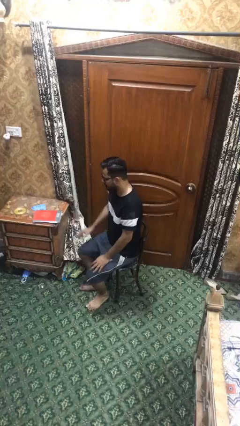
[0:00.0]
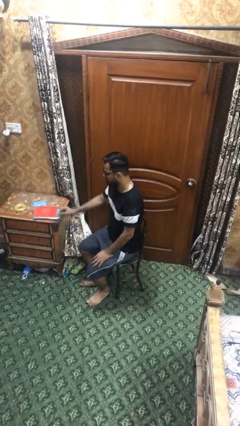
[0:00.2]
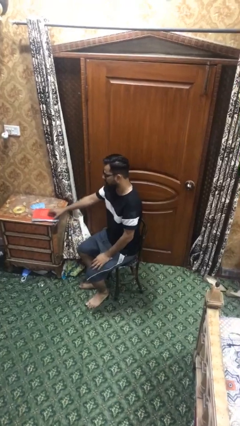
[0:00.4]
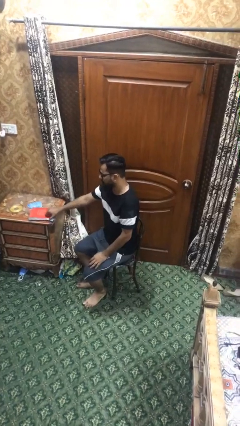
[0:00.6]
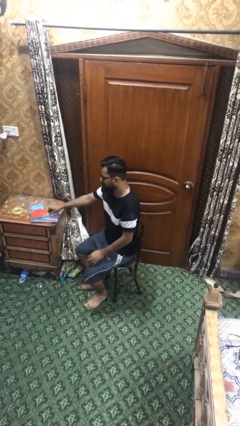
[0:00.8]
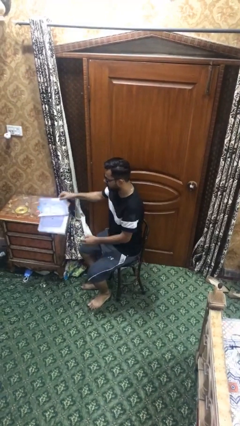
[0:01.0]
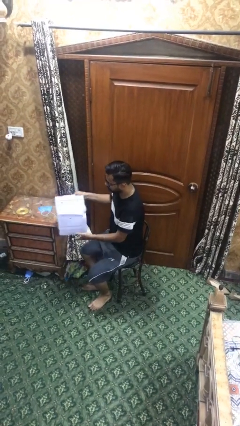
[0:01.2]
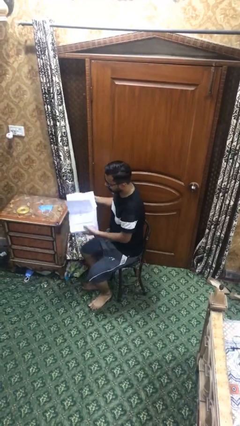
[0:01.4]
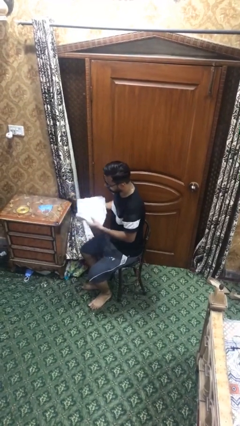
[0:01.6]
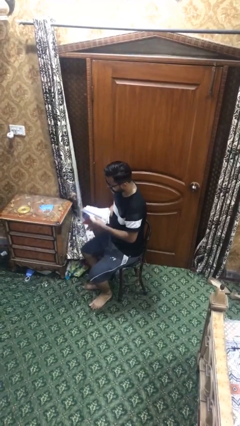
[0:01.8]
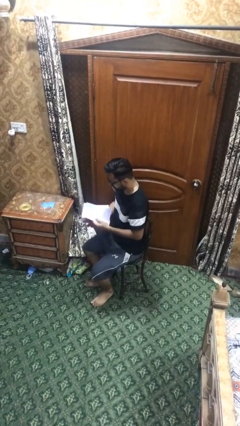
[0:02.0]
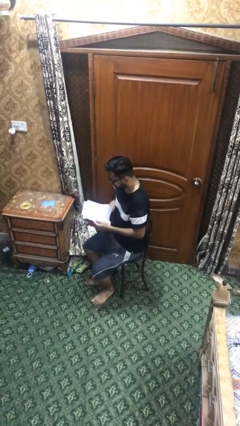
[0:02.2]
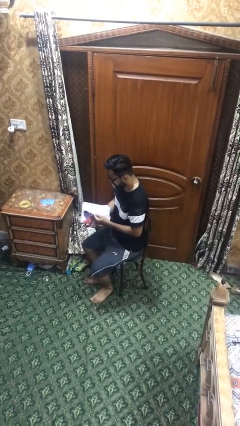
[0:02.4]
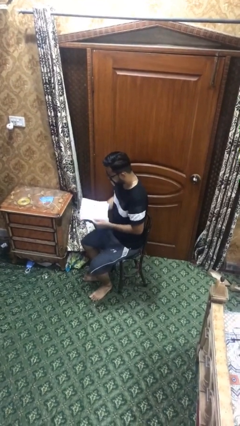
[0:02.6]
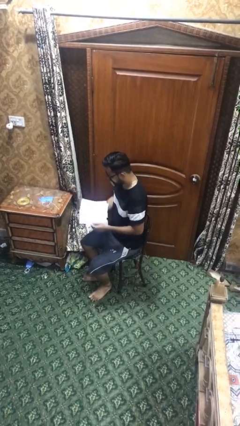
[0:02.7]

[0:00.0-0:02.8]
person reads document

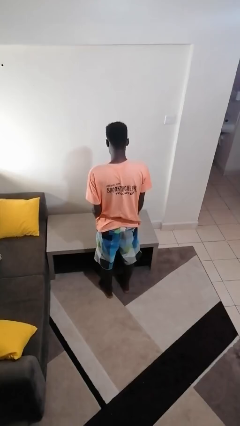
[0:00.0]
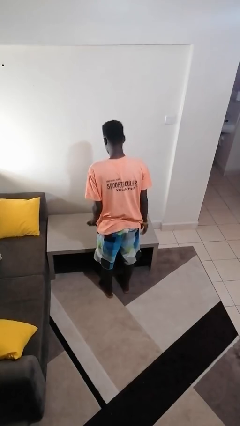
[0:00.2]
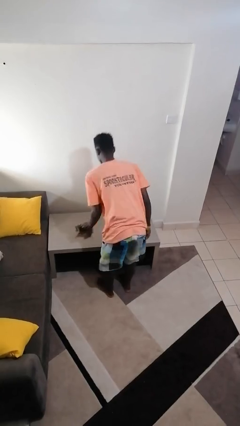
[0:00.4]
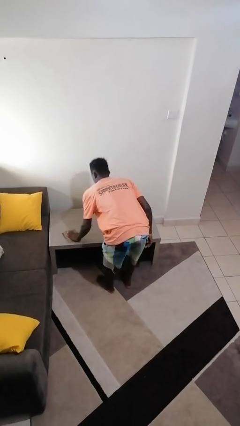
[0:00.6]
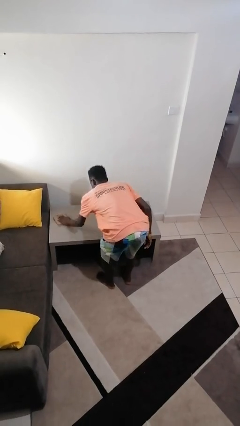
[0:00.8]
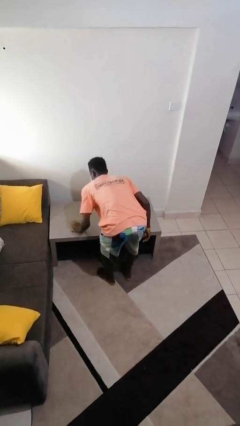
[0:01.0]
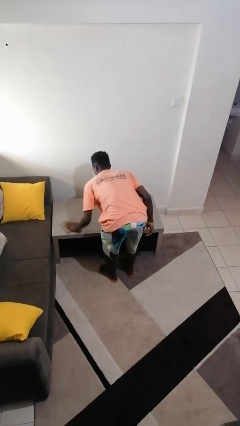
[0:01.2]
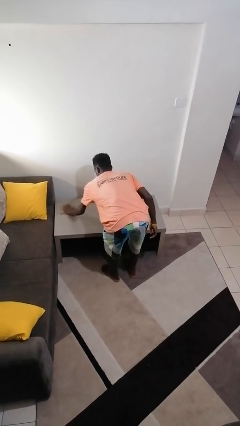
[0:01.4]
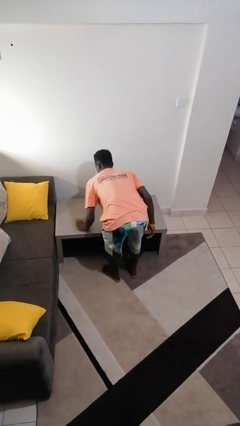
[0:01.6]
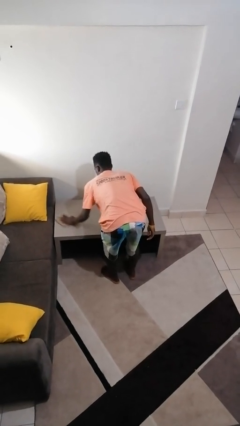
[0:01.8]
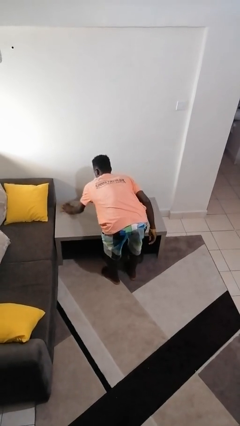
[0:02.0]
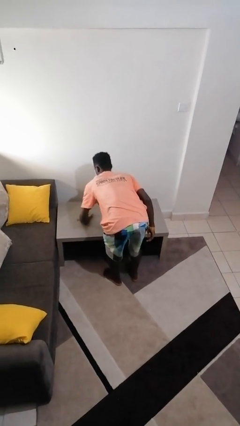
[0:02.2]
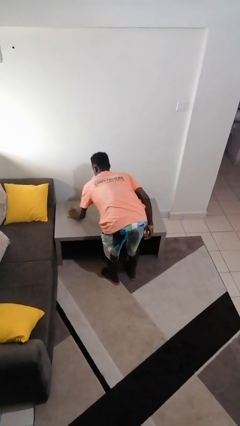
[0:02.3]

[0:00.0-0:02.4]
person cleans table with rag

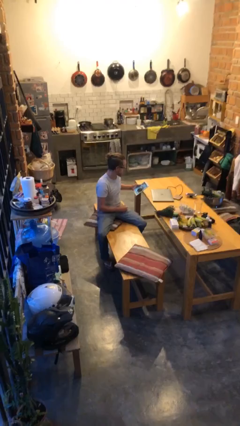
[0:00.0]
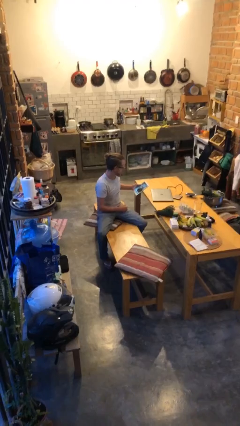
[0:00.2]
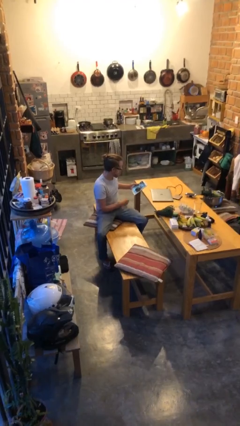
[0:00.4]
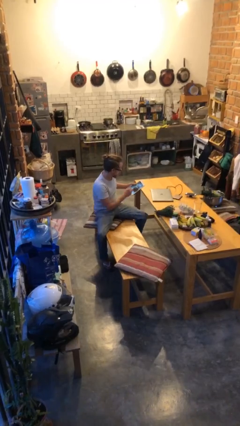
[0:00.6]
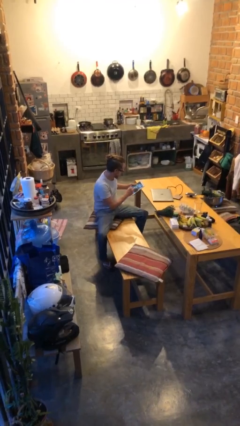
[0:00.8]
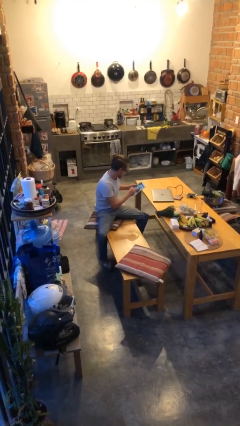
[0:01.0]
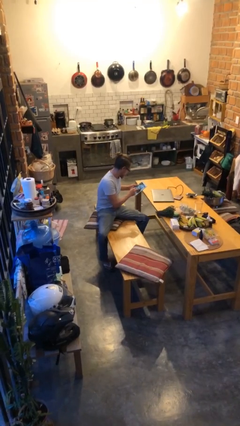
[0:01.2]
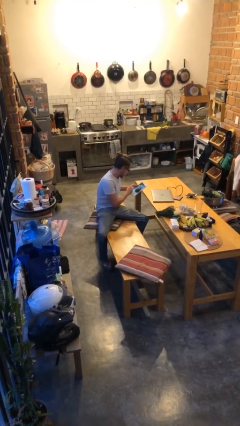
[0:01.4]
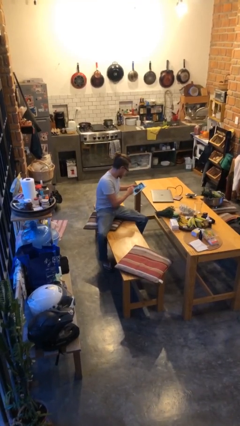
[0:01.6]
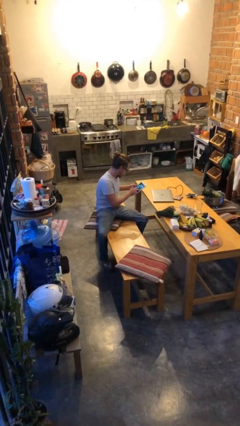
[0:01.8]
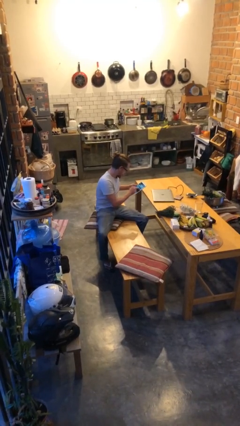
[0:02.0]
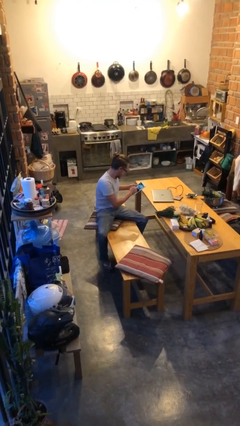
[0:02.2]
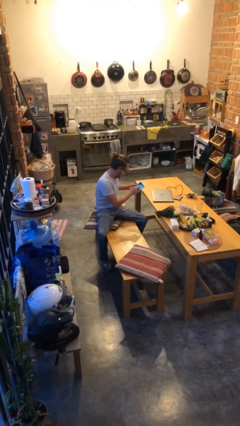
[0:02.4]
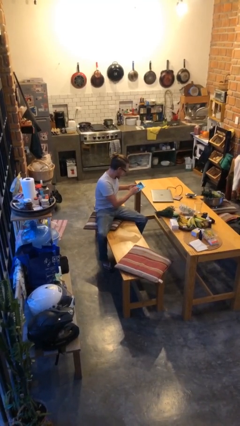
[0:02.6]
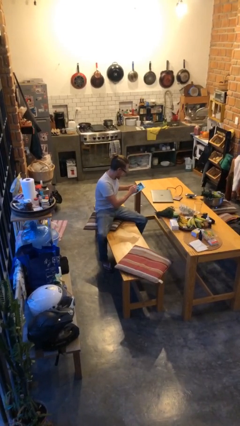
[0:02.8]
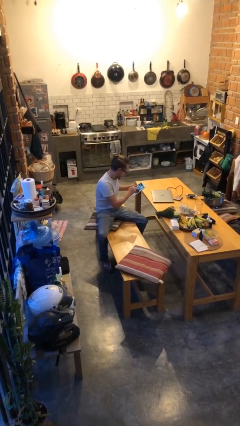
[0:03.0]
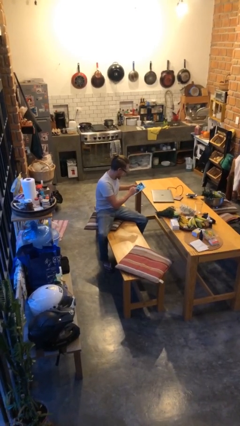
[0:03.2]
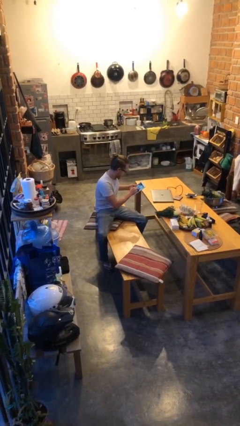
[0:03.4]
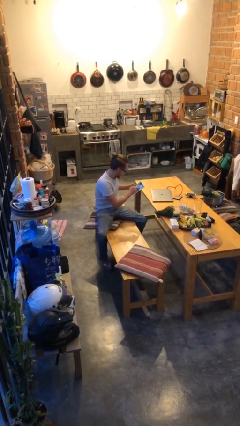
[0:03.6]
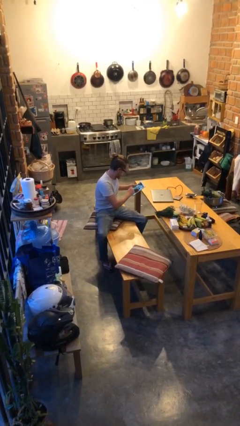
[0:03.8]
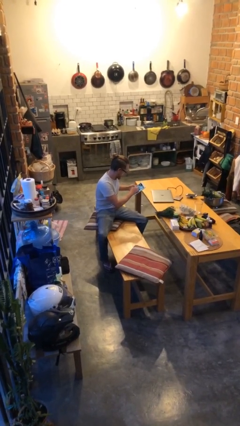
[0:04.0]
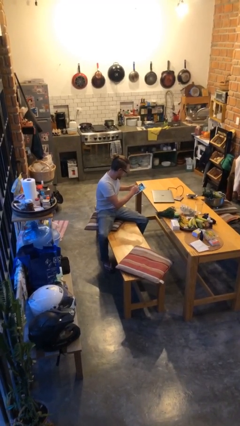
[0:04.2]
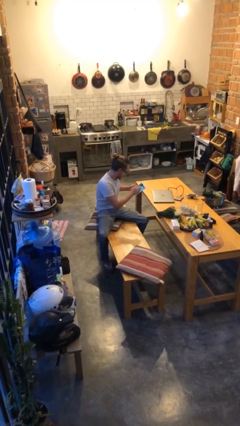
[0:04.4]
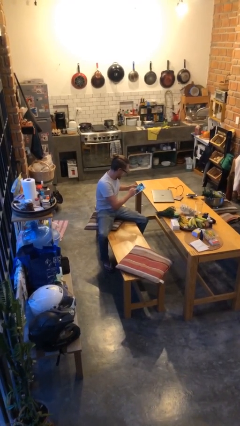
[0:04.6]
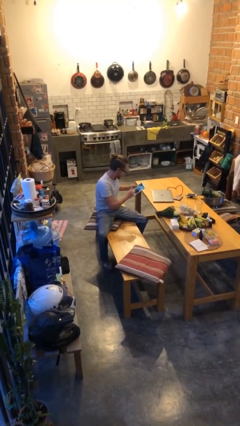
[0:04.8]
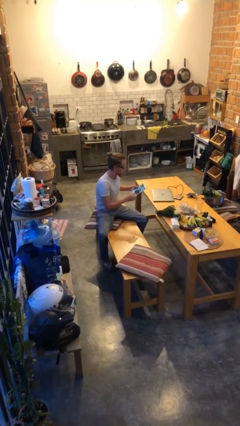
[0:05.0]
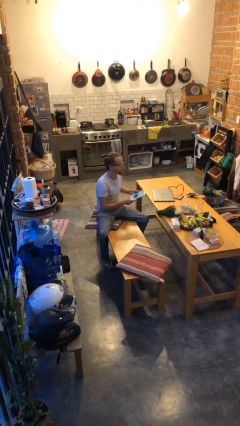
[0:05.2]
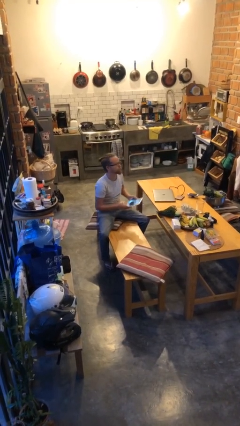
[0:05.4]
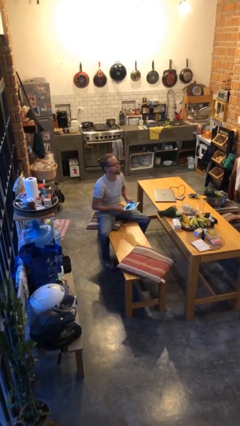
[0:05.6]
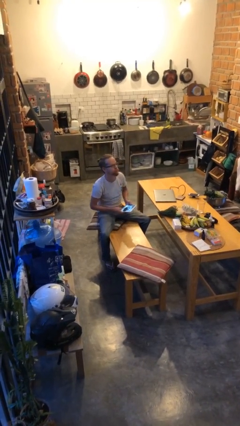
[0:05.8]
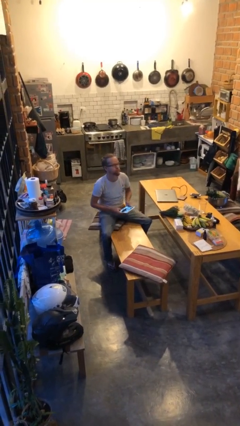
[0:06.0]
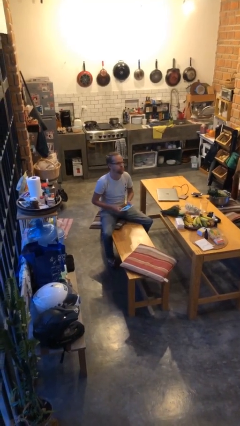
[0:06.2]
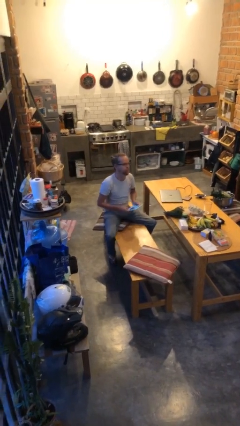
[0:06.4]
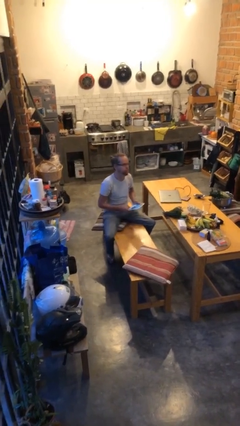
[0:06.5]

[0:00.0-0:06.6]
person interacts with tablet

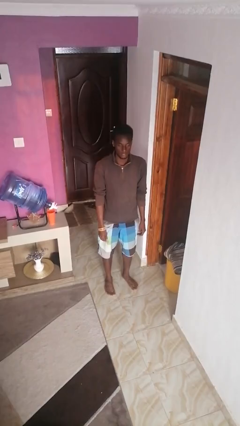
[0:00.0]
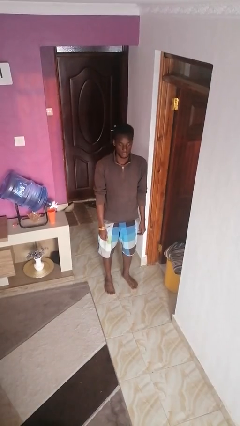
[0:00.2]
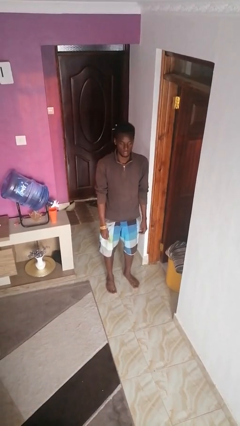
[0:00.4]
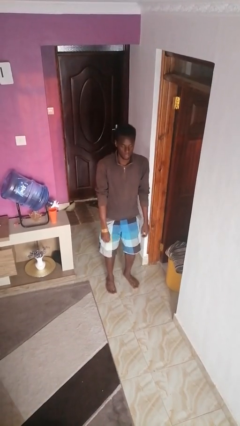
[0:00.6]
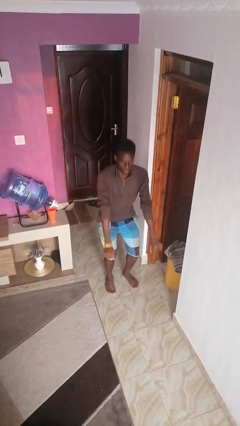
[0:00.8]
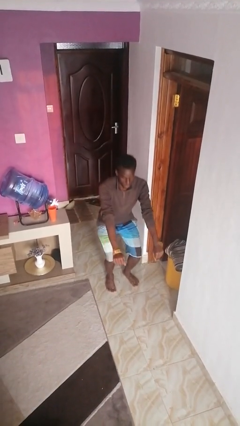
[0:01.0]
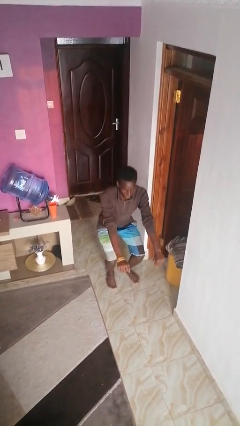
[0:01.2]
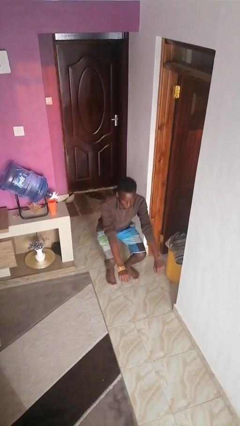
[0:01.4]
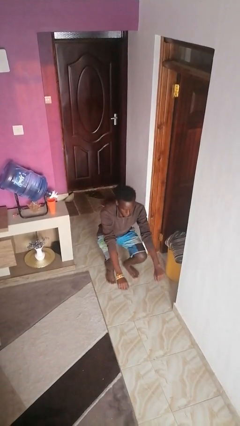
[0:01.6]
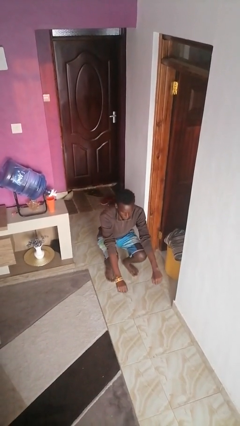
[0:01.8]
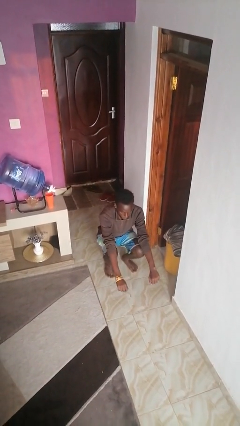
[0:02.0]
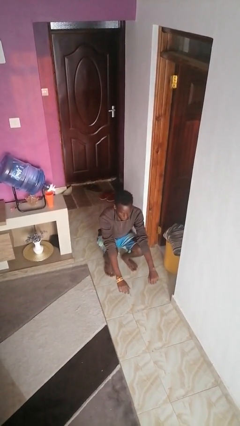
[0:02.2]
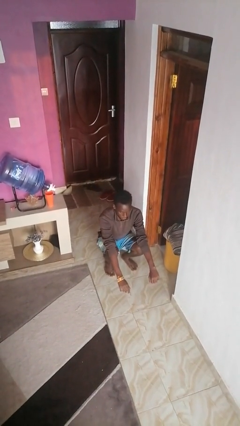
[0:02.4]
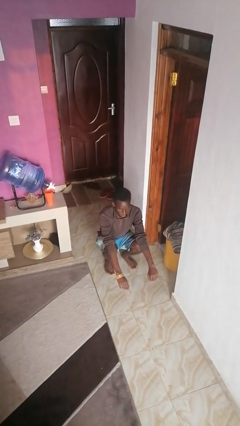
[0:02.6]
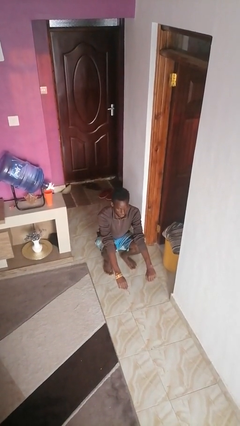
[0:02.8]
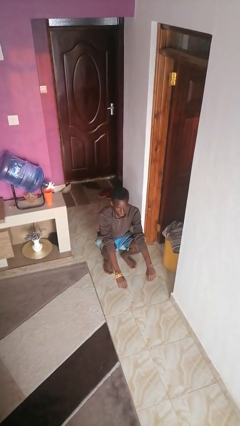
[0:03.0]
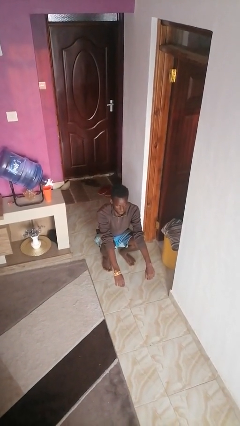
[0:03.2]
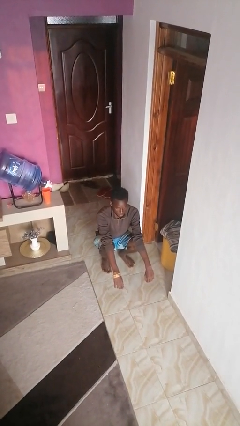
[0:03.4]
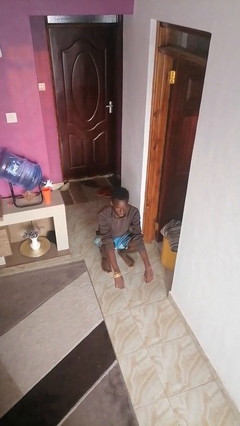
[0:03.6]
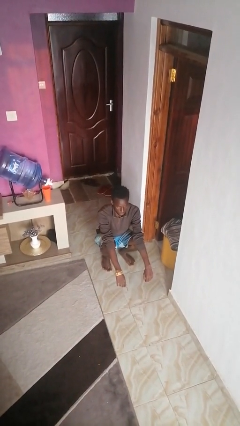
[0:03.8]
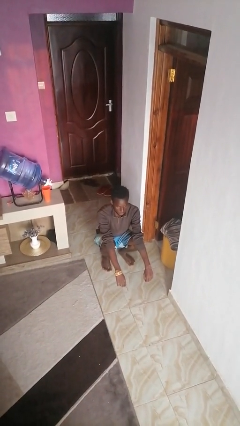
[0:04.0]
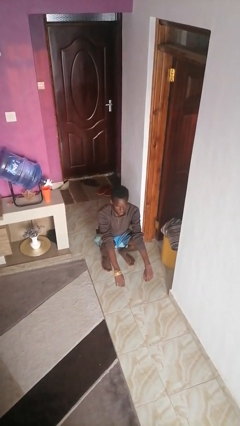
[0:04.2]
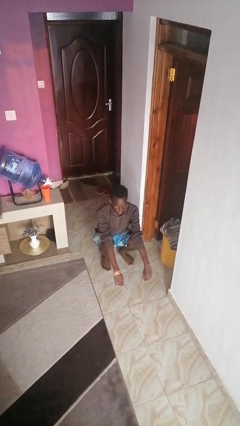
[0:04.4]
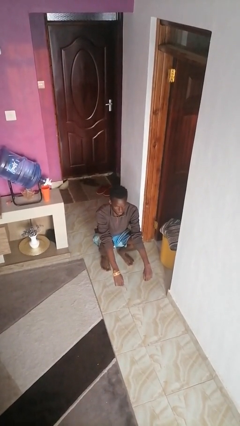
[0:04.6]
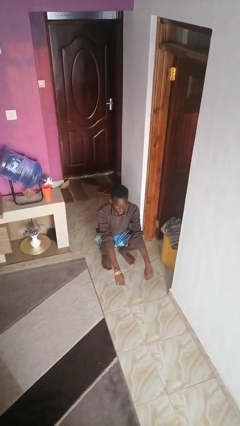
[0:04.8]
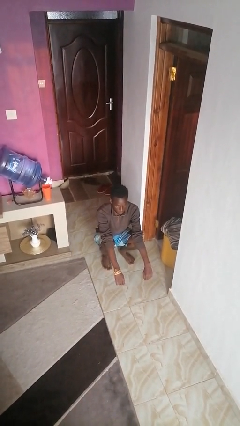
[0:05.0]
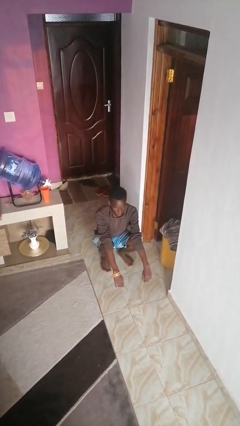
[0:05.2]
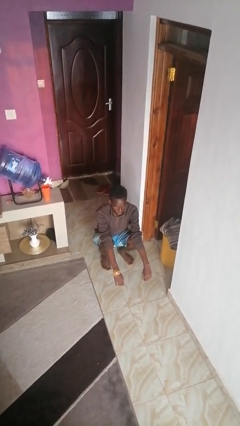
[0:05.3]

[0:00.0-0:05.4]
person squats

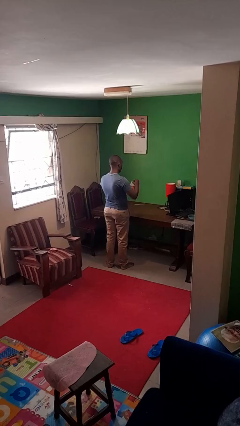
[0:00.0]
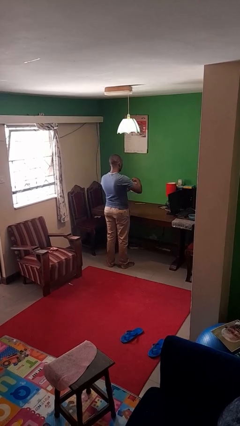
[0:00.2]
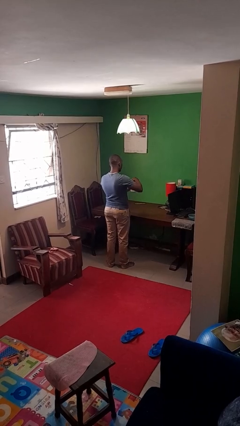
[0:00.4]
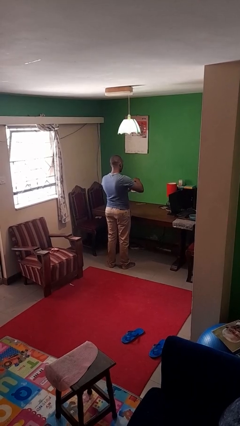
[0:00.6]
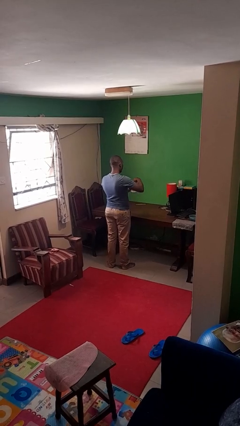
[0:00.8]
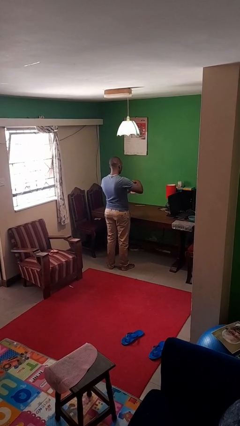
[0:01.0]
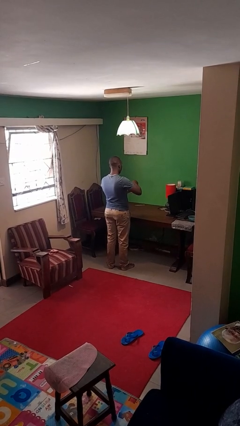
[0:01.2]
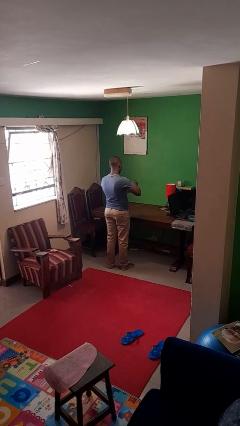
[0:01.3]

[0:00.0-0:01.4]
person closes jar
